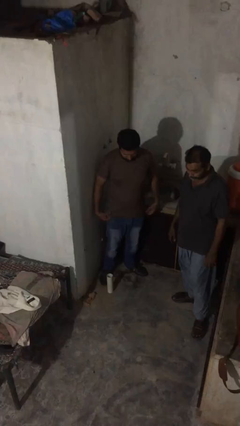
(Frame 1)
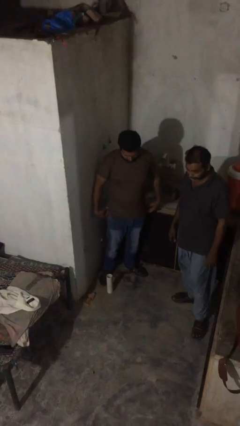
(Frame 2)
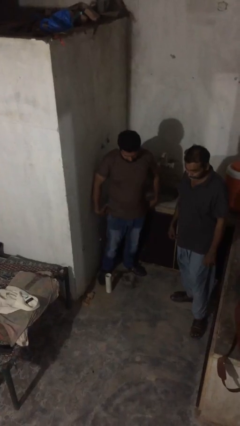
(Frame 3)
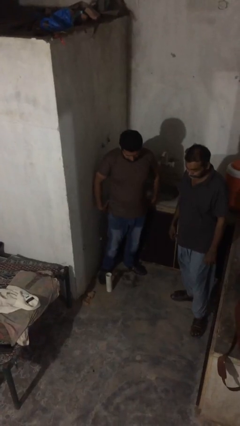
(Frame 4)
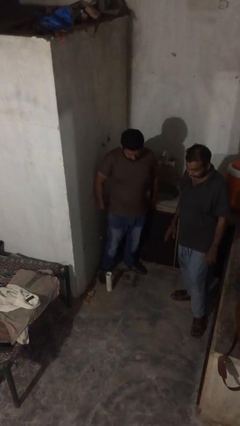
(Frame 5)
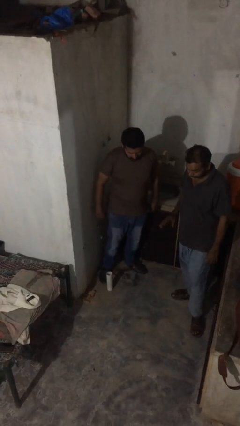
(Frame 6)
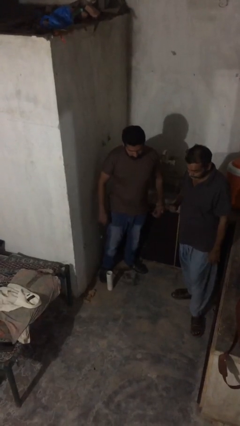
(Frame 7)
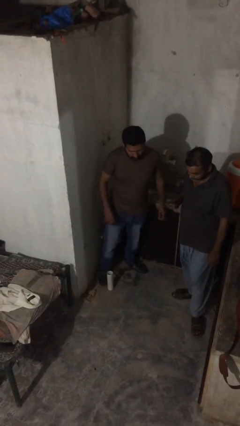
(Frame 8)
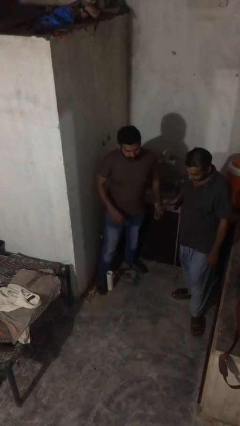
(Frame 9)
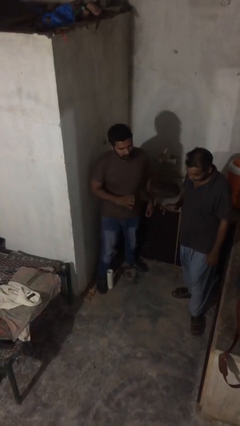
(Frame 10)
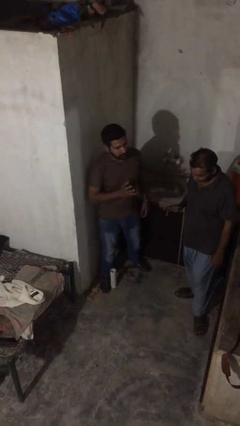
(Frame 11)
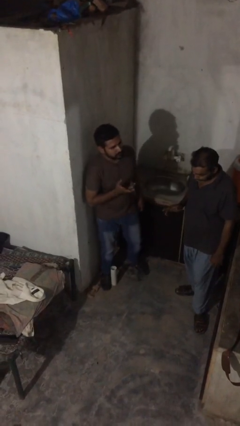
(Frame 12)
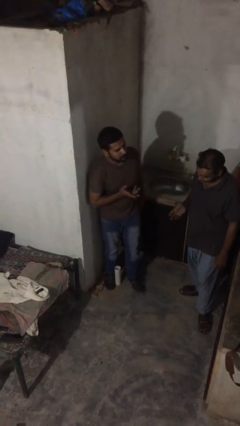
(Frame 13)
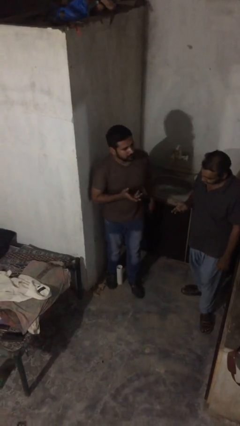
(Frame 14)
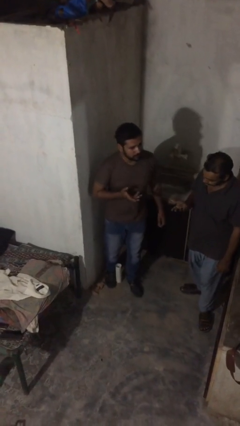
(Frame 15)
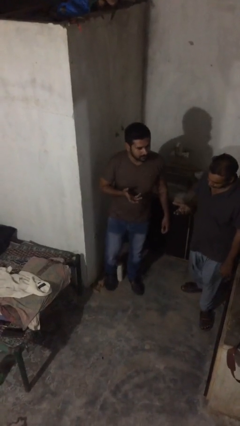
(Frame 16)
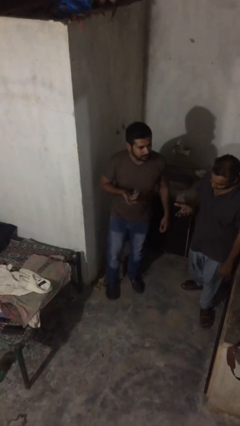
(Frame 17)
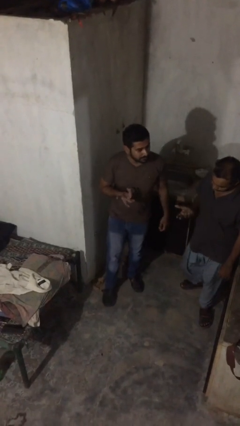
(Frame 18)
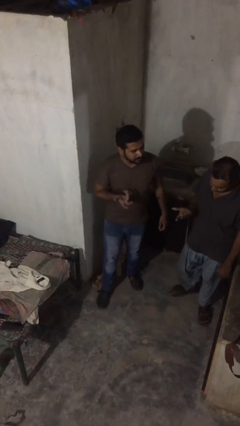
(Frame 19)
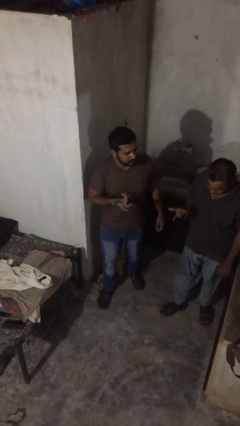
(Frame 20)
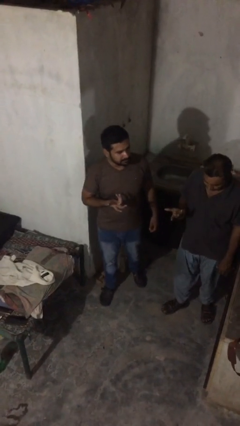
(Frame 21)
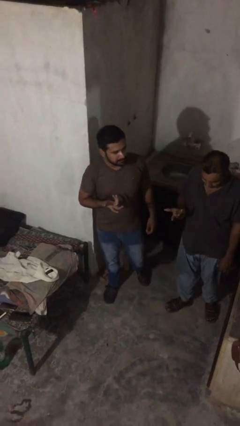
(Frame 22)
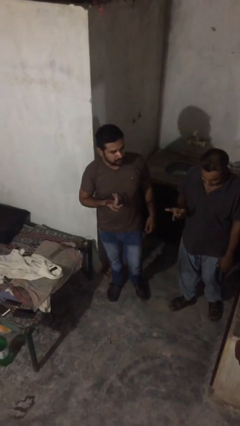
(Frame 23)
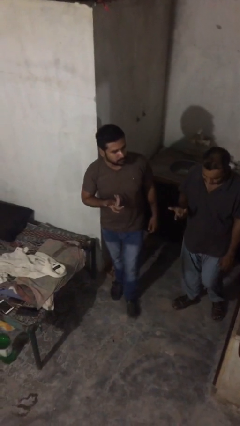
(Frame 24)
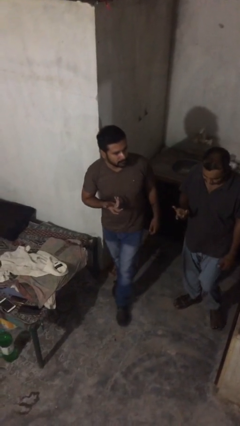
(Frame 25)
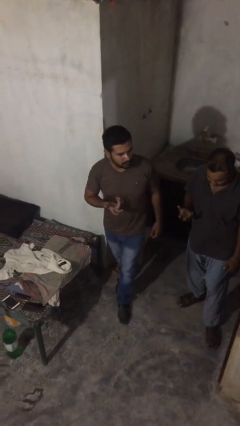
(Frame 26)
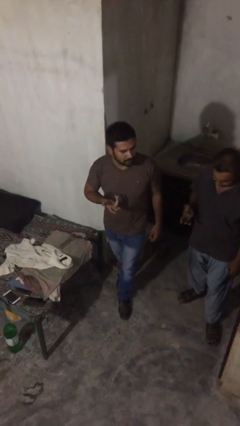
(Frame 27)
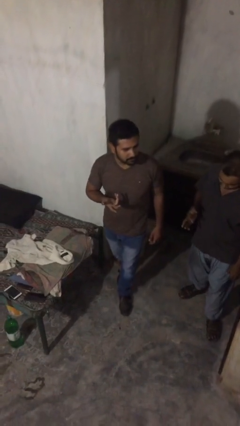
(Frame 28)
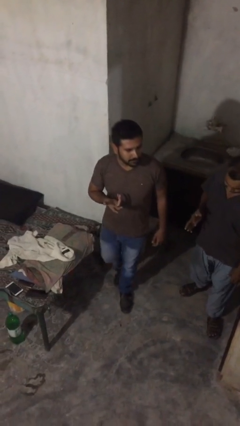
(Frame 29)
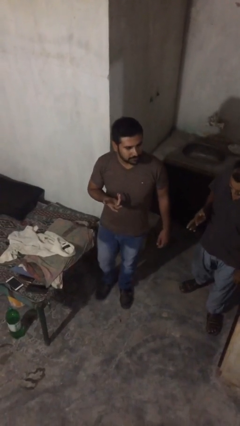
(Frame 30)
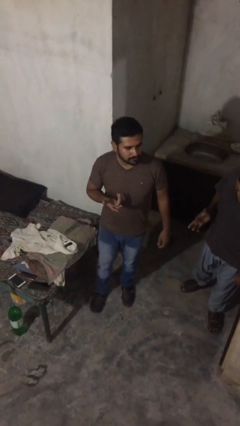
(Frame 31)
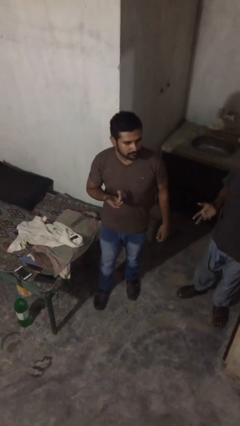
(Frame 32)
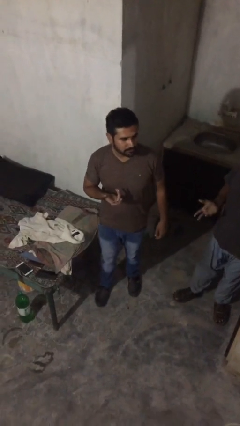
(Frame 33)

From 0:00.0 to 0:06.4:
person talks to person

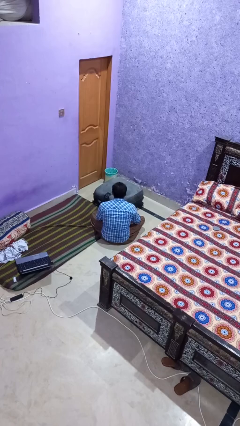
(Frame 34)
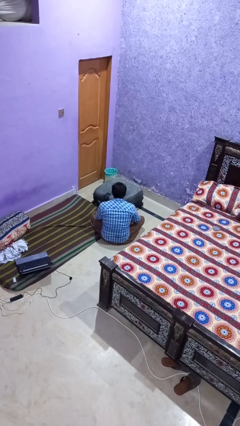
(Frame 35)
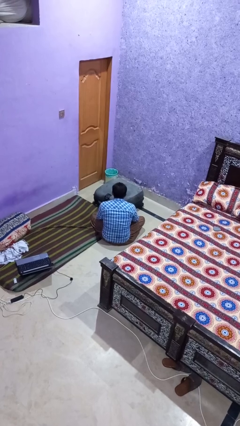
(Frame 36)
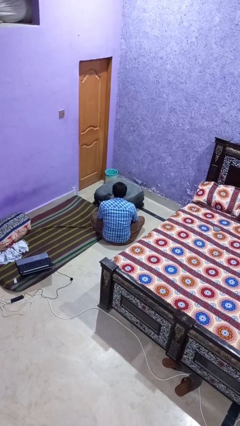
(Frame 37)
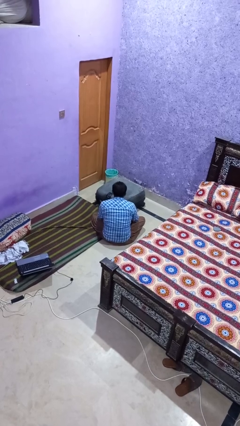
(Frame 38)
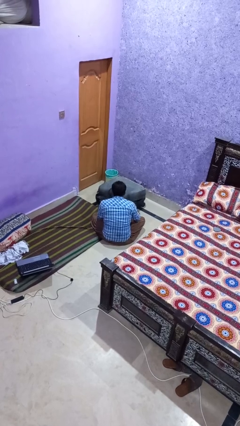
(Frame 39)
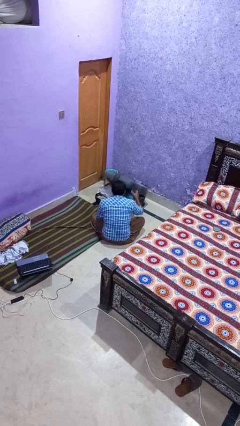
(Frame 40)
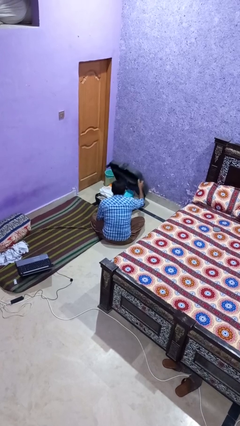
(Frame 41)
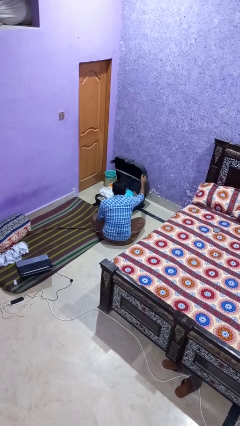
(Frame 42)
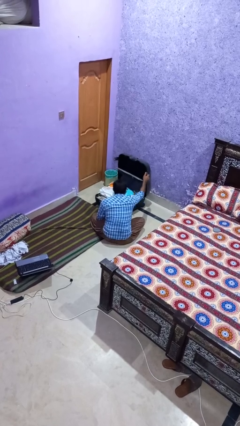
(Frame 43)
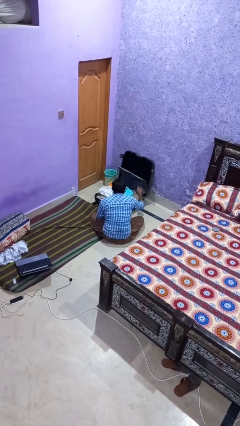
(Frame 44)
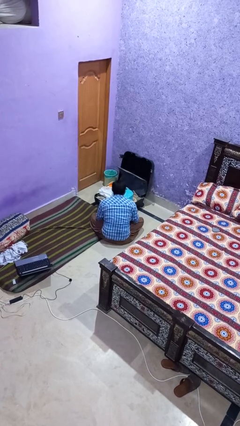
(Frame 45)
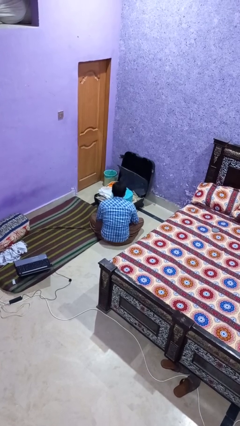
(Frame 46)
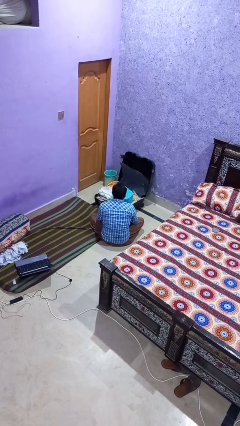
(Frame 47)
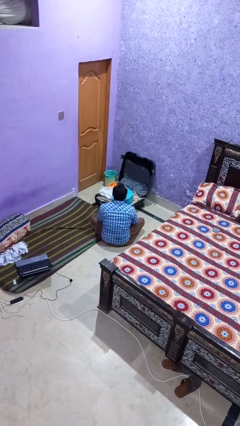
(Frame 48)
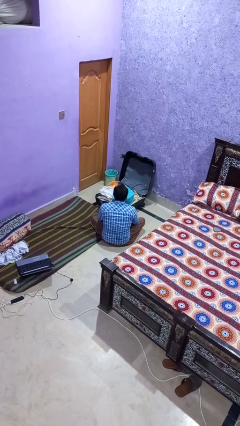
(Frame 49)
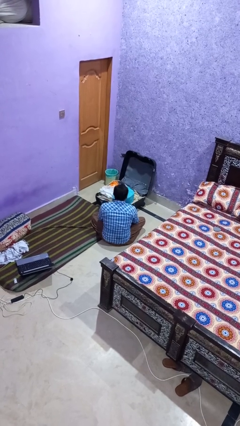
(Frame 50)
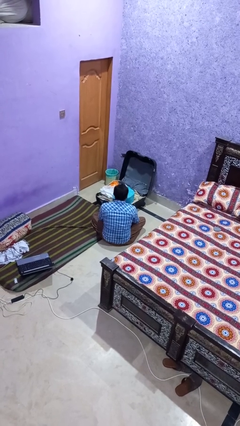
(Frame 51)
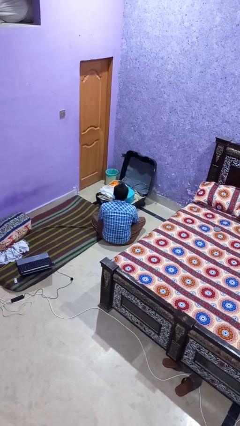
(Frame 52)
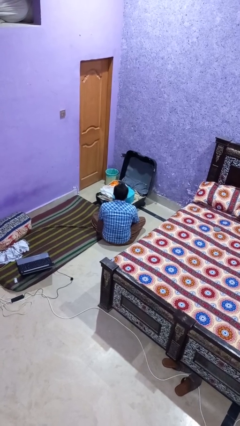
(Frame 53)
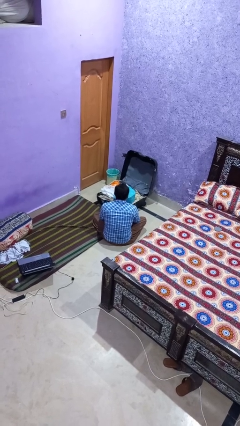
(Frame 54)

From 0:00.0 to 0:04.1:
person opens suitcase

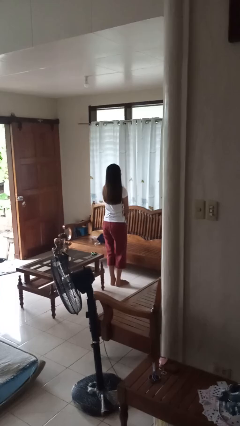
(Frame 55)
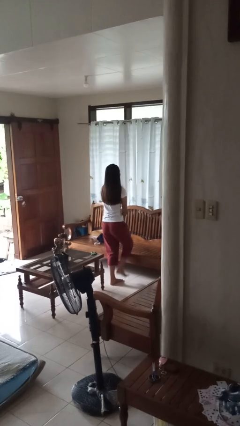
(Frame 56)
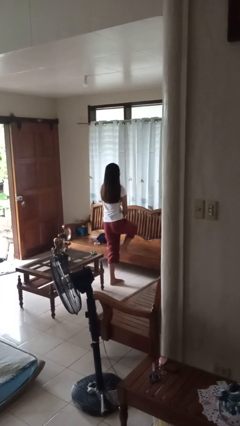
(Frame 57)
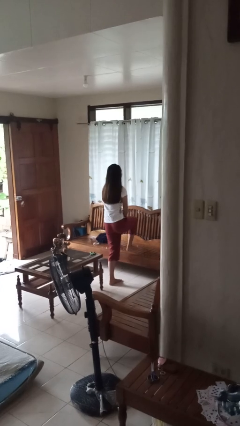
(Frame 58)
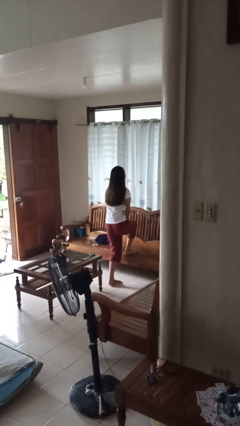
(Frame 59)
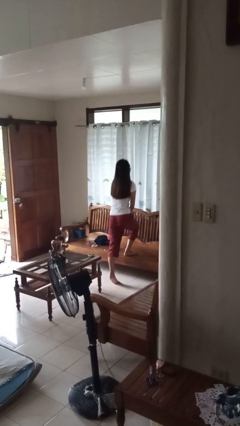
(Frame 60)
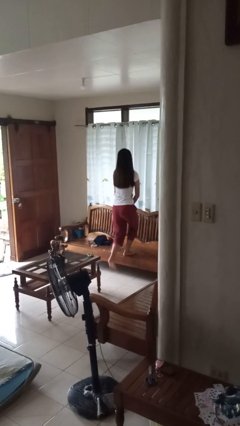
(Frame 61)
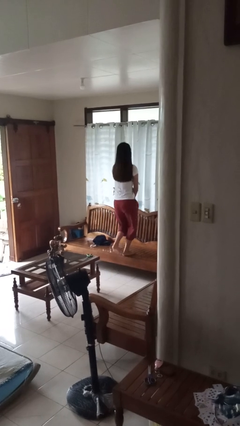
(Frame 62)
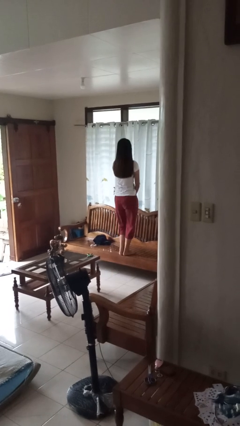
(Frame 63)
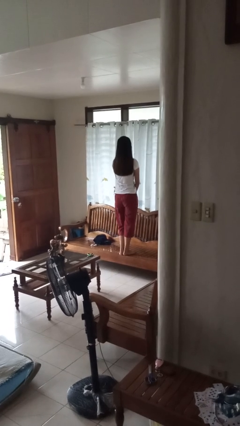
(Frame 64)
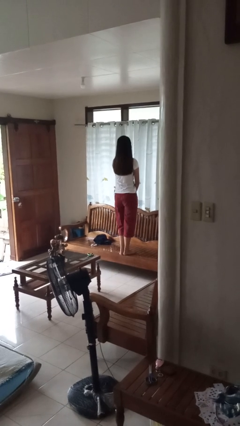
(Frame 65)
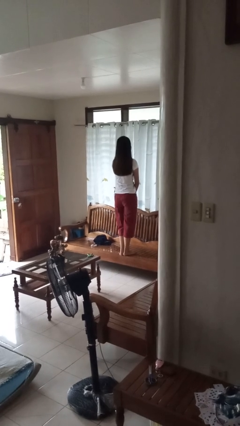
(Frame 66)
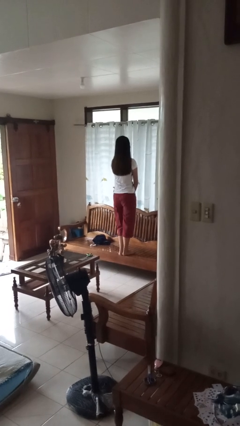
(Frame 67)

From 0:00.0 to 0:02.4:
person climbs on chair

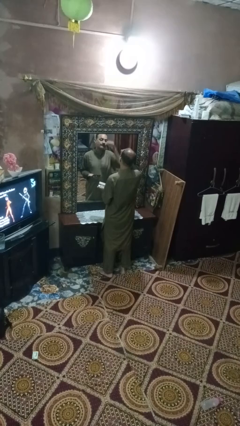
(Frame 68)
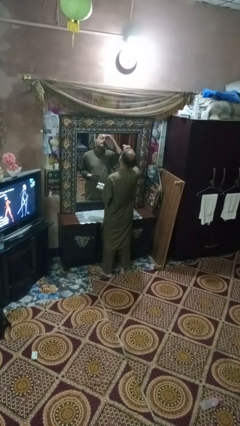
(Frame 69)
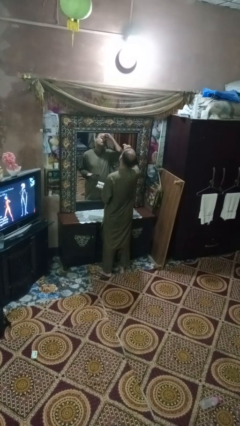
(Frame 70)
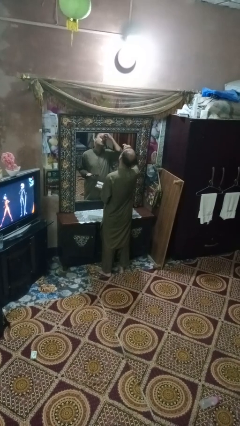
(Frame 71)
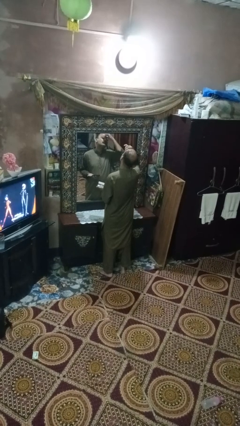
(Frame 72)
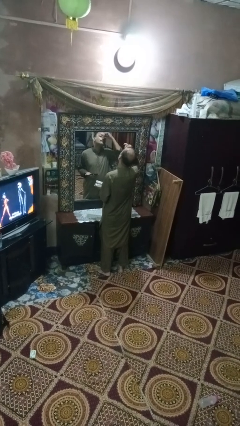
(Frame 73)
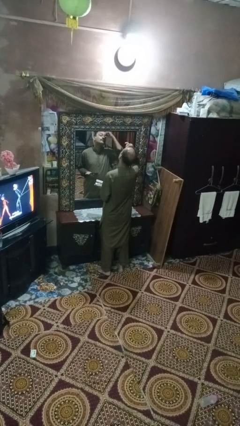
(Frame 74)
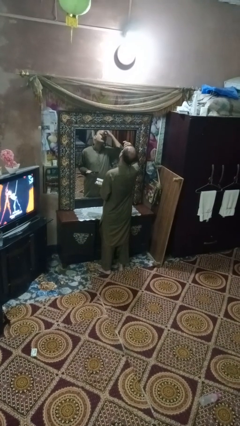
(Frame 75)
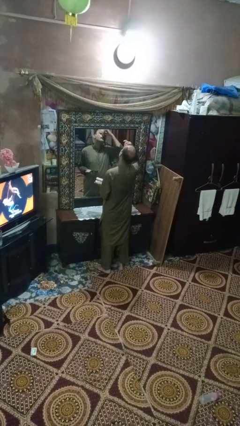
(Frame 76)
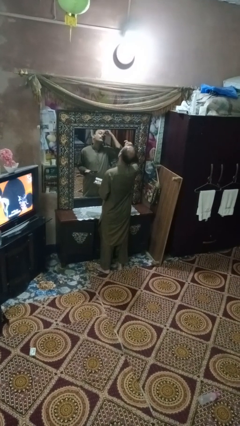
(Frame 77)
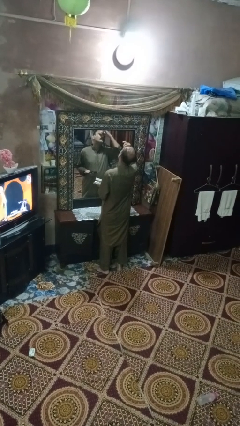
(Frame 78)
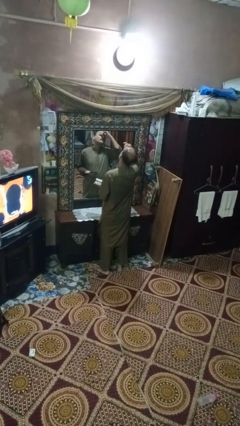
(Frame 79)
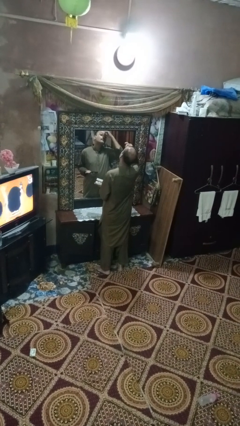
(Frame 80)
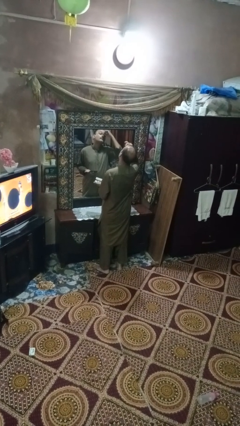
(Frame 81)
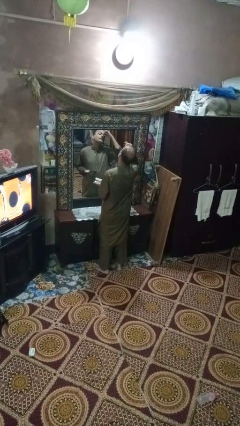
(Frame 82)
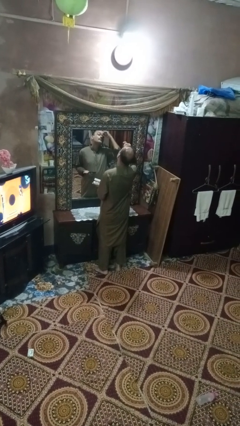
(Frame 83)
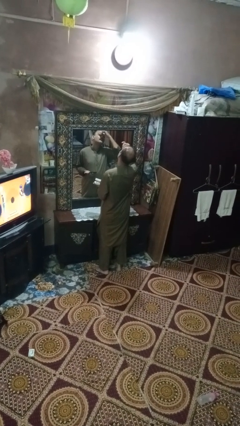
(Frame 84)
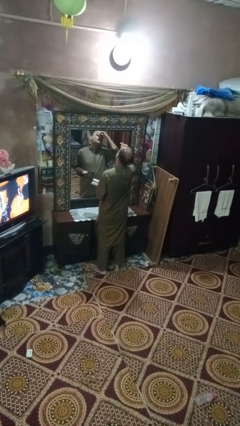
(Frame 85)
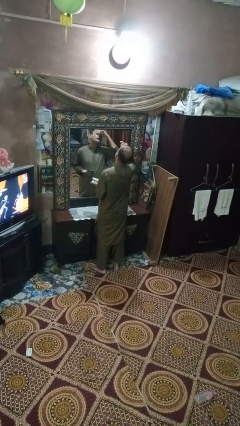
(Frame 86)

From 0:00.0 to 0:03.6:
person applies eye makeup

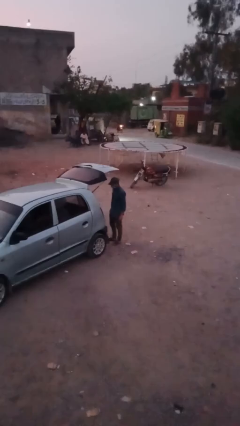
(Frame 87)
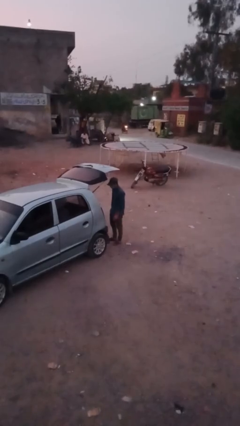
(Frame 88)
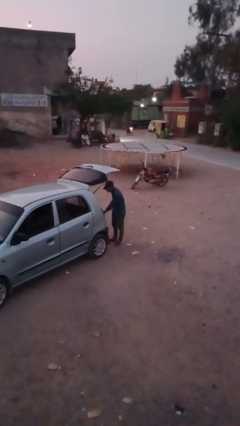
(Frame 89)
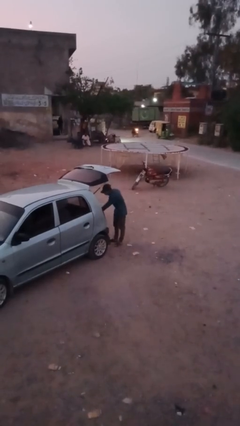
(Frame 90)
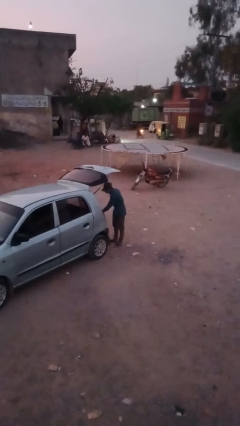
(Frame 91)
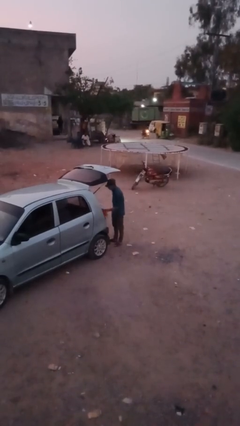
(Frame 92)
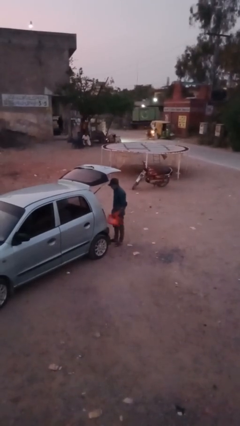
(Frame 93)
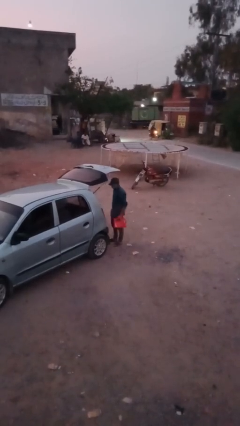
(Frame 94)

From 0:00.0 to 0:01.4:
person unloads car

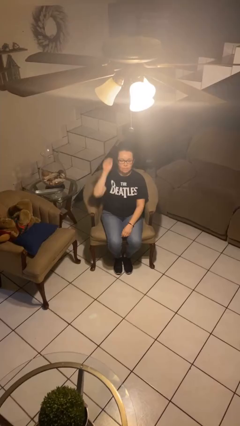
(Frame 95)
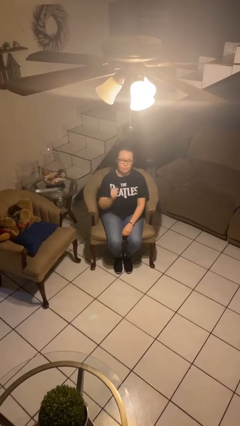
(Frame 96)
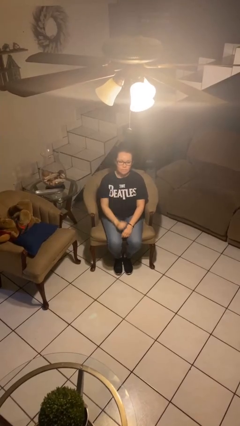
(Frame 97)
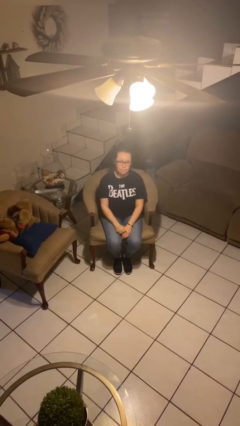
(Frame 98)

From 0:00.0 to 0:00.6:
person gestures lower hand
